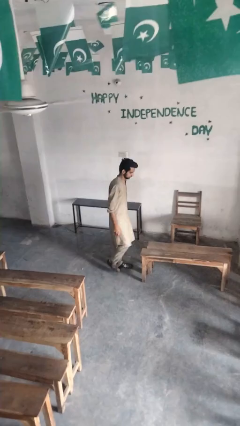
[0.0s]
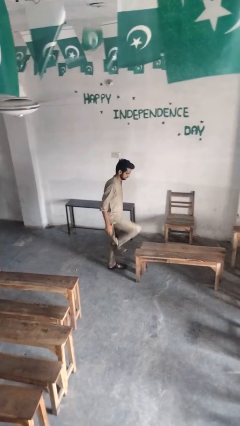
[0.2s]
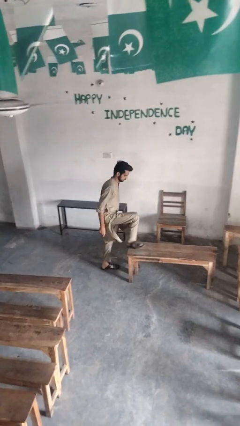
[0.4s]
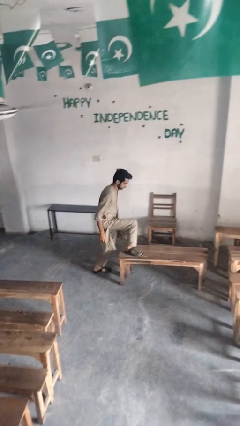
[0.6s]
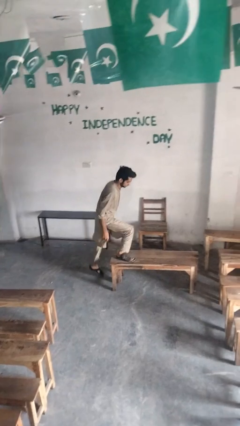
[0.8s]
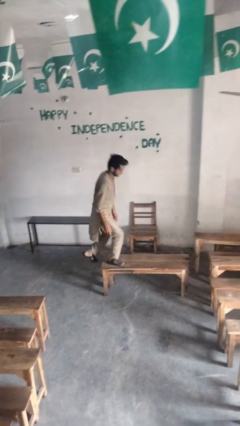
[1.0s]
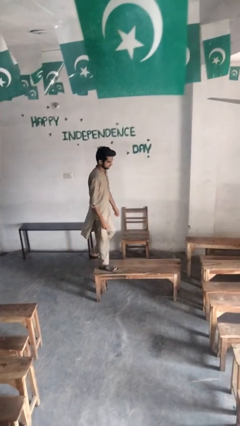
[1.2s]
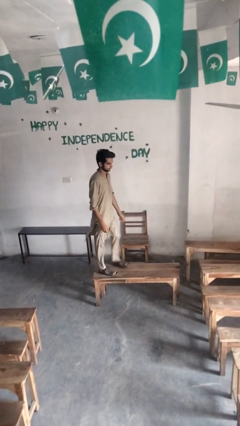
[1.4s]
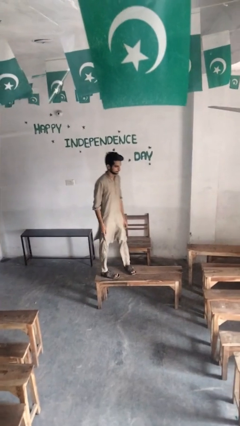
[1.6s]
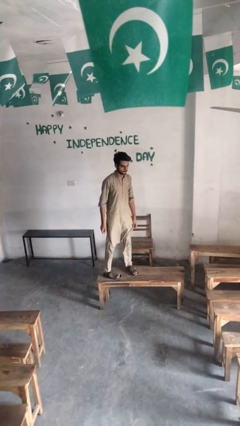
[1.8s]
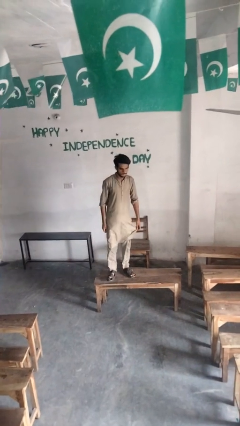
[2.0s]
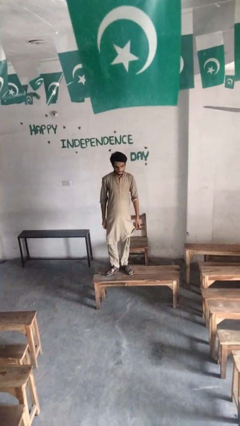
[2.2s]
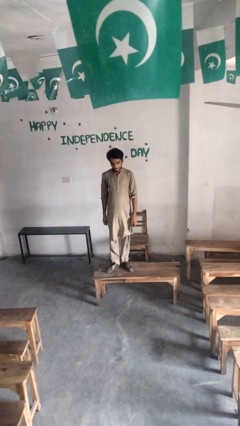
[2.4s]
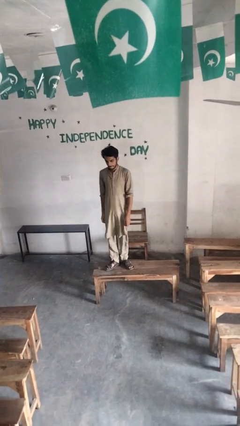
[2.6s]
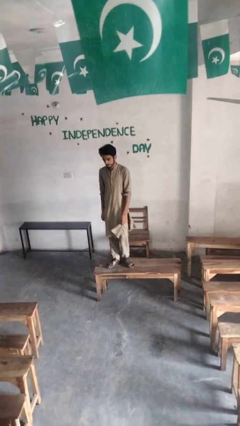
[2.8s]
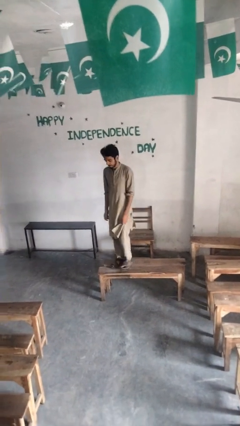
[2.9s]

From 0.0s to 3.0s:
person climbs on table

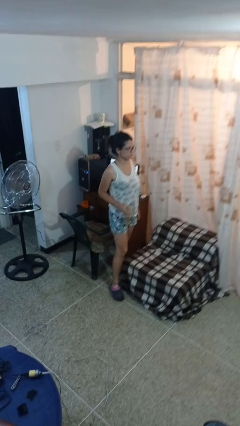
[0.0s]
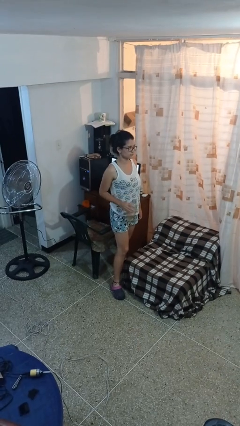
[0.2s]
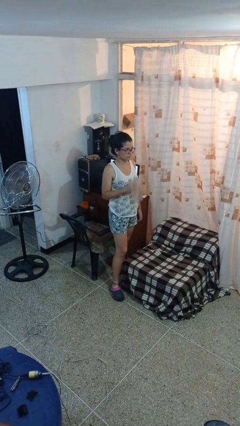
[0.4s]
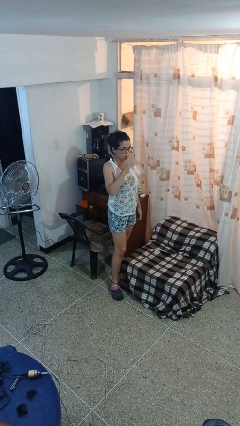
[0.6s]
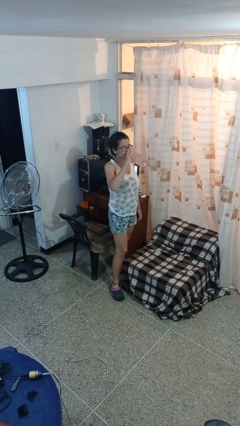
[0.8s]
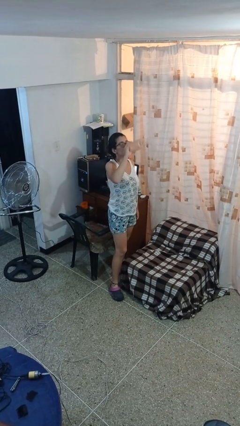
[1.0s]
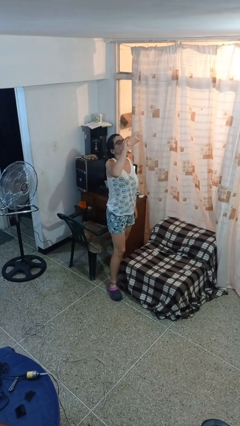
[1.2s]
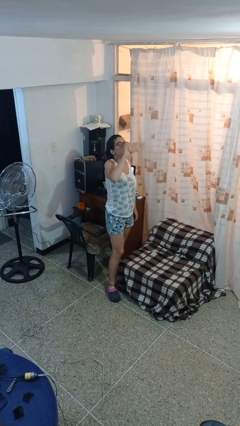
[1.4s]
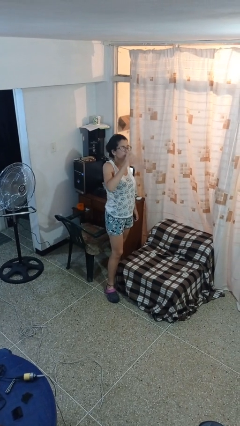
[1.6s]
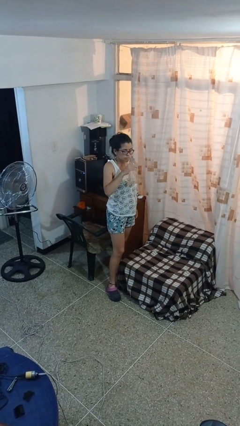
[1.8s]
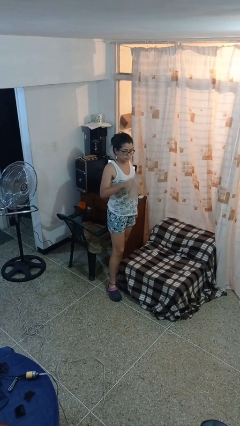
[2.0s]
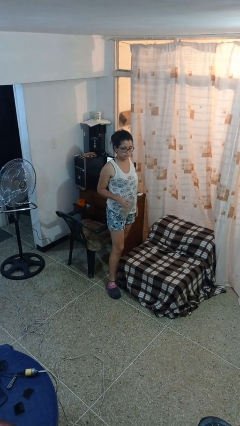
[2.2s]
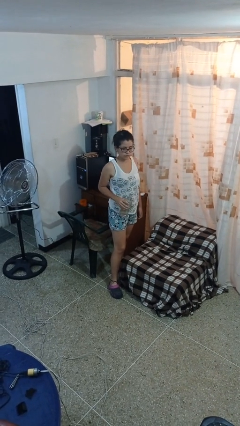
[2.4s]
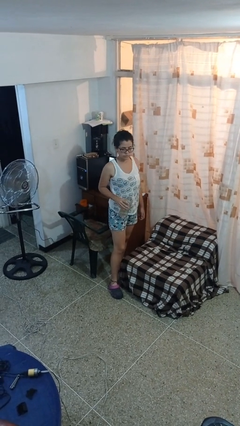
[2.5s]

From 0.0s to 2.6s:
person drinks from bottle

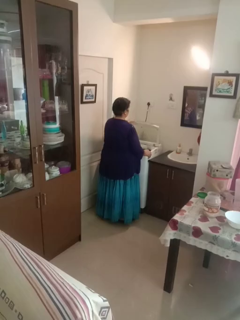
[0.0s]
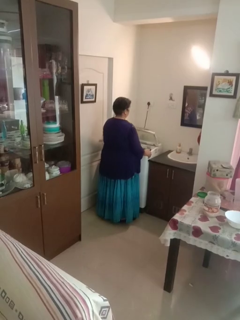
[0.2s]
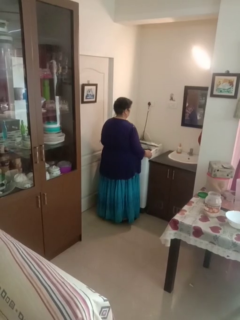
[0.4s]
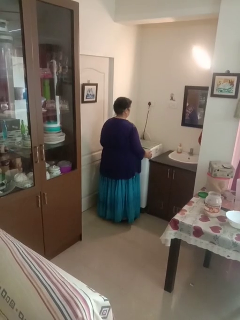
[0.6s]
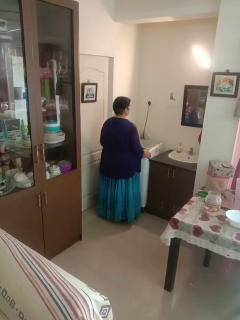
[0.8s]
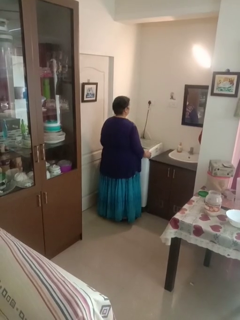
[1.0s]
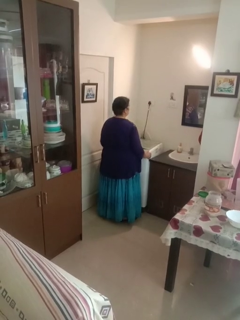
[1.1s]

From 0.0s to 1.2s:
person closes clothes washer

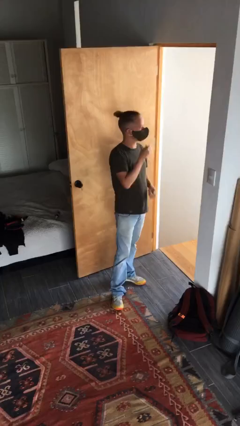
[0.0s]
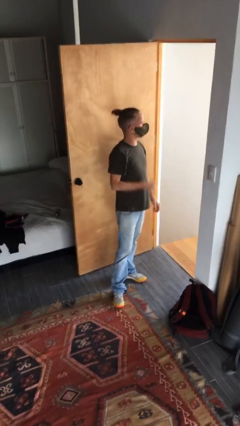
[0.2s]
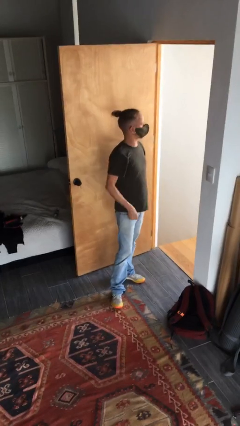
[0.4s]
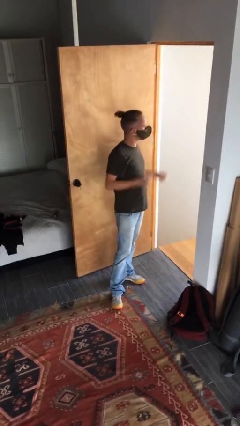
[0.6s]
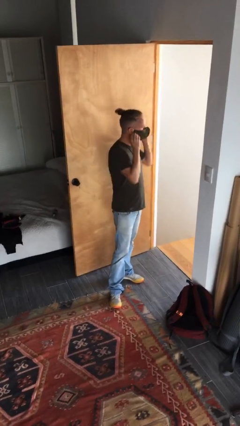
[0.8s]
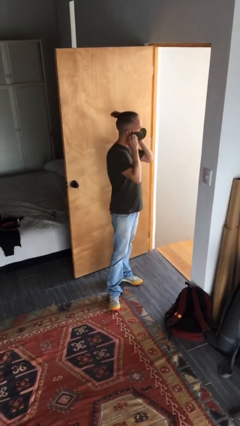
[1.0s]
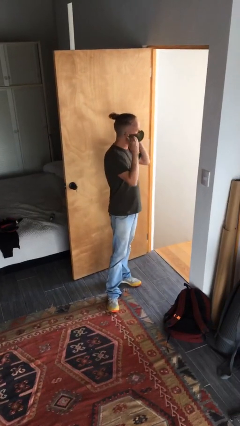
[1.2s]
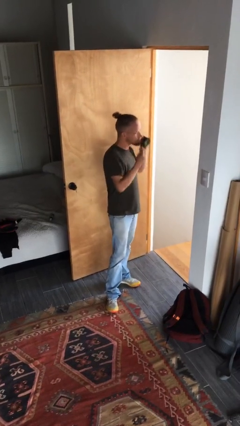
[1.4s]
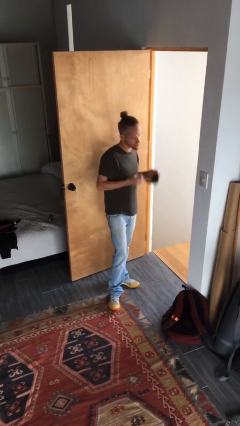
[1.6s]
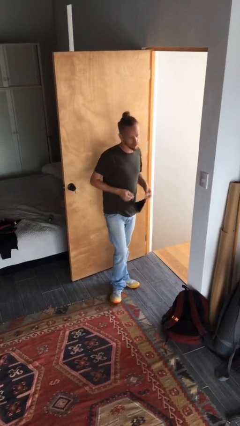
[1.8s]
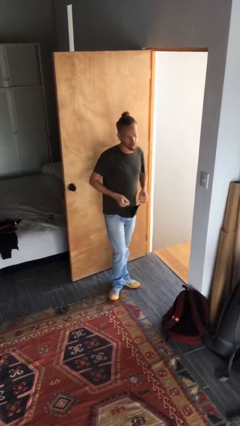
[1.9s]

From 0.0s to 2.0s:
person takes off facemask

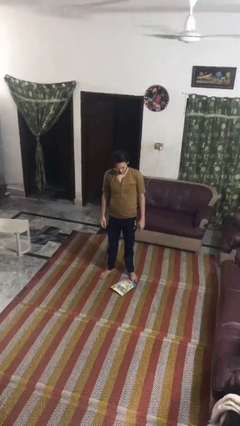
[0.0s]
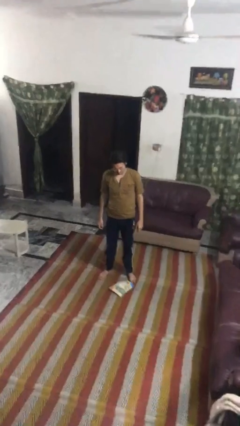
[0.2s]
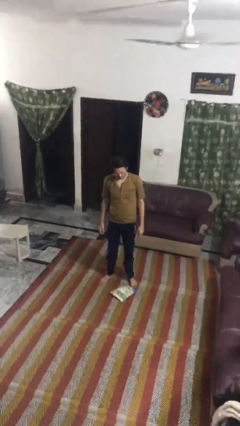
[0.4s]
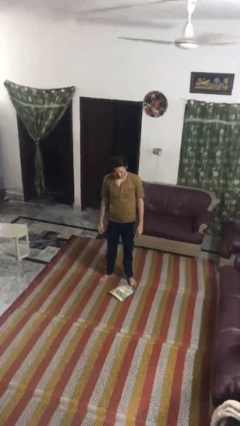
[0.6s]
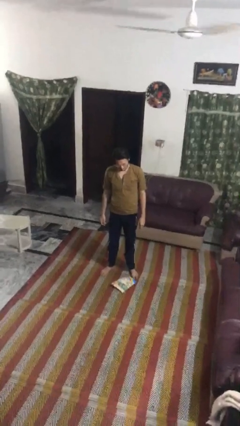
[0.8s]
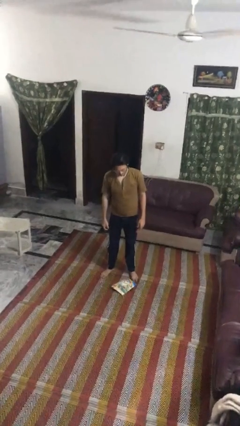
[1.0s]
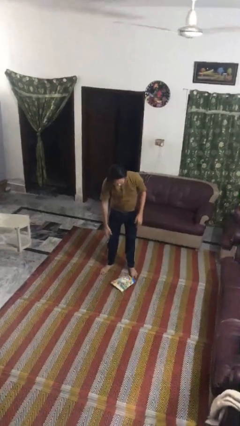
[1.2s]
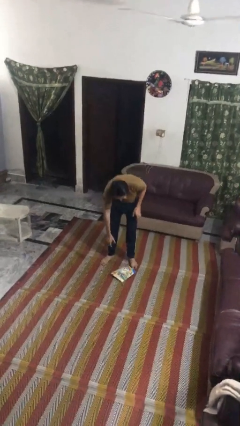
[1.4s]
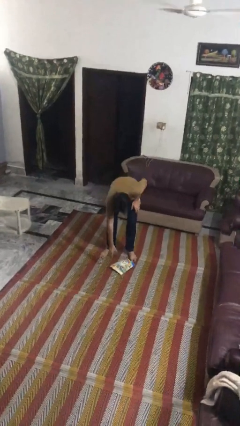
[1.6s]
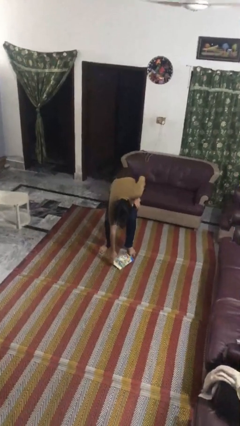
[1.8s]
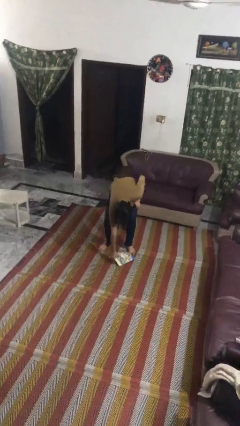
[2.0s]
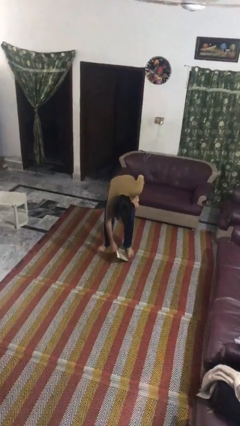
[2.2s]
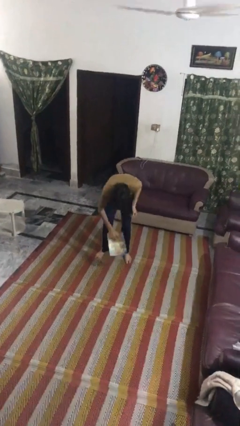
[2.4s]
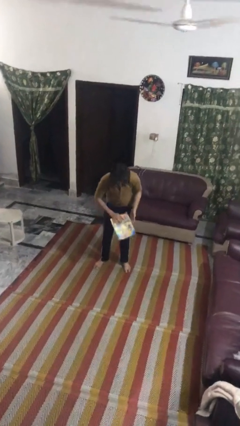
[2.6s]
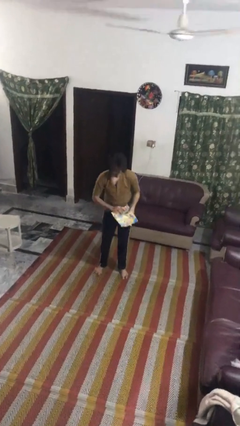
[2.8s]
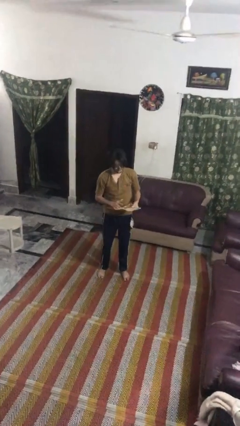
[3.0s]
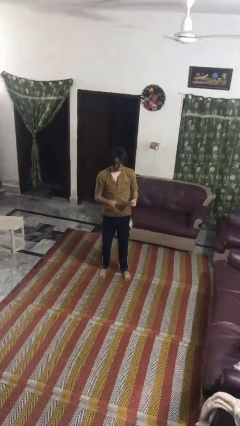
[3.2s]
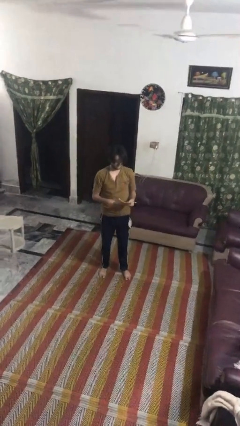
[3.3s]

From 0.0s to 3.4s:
person picks up object from floor

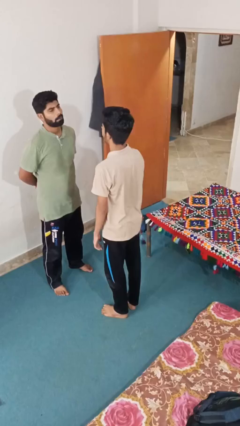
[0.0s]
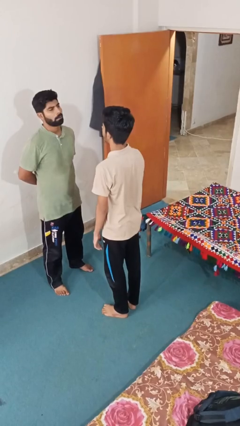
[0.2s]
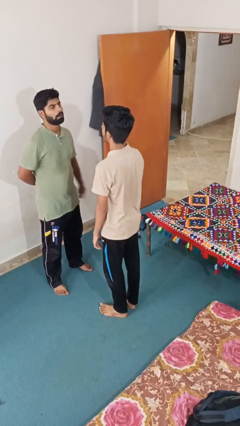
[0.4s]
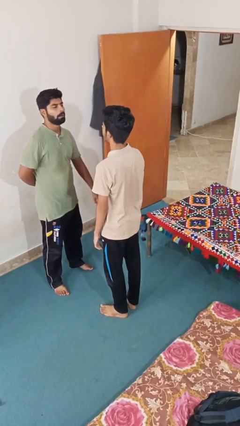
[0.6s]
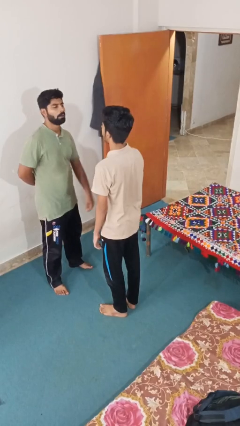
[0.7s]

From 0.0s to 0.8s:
person pounds shoulders of person

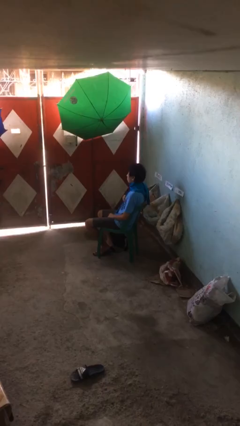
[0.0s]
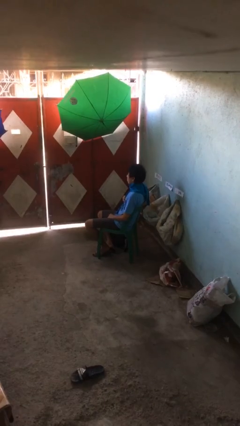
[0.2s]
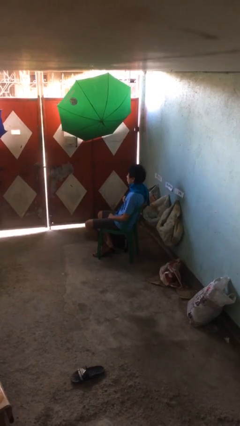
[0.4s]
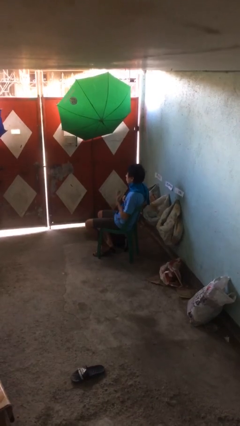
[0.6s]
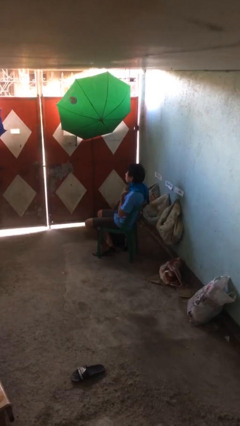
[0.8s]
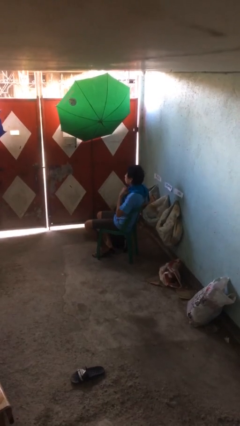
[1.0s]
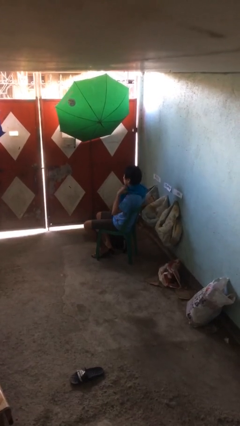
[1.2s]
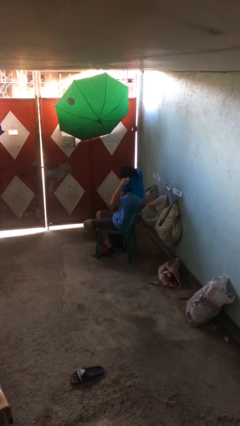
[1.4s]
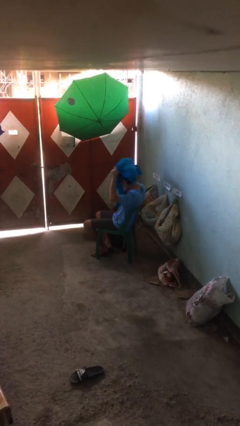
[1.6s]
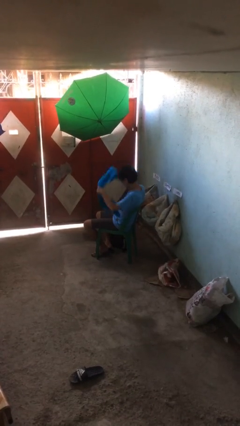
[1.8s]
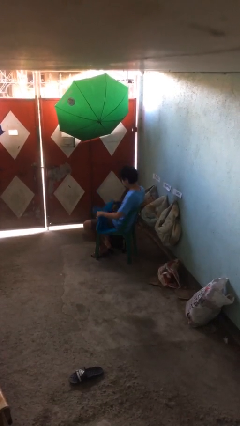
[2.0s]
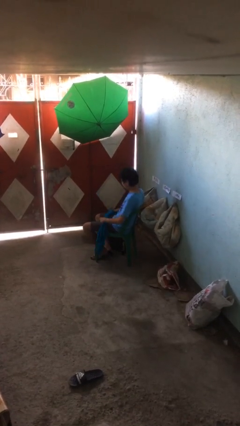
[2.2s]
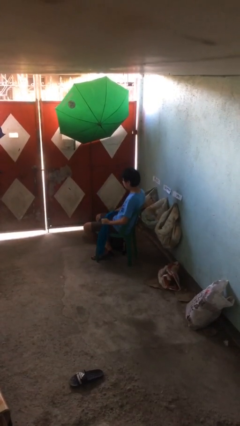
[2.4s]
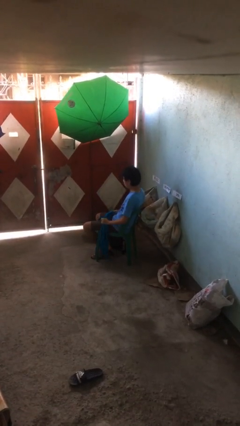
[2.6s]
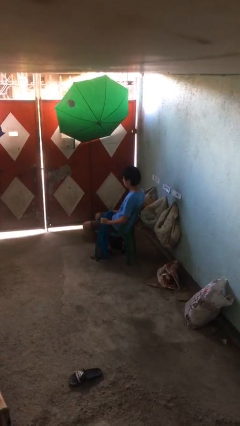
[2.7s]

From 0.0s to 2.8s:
person takes off scarf

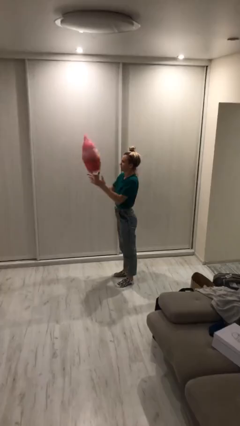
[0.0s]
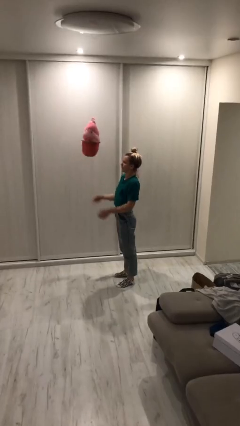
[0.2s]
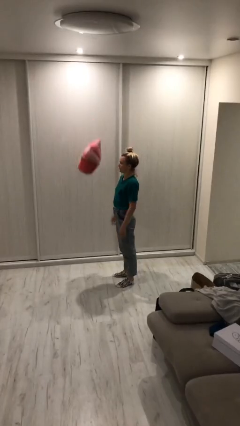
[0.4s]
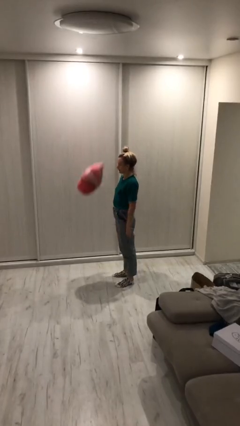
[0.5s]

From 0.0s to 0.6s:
person throws object into air

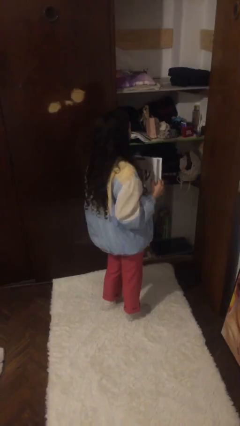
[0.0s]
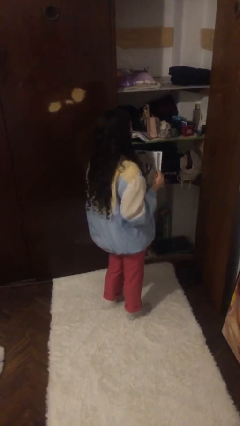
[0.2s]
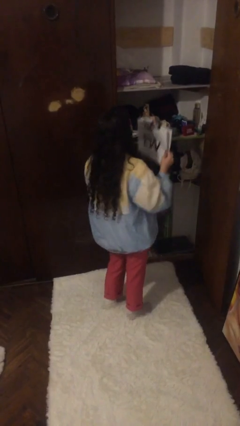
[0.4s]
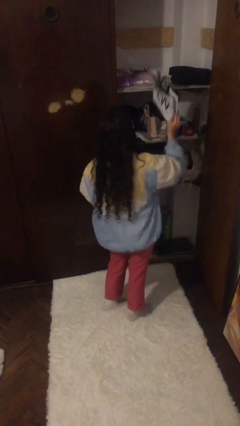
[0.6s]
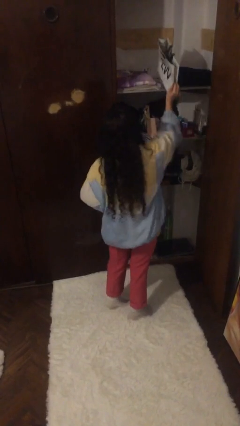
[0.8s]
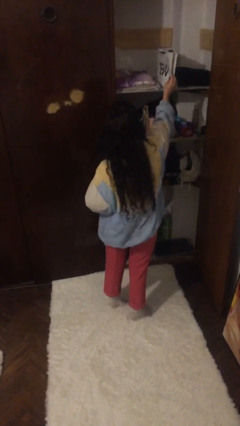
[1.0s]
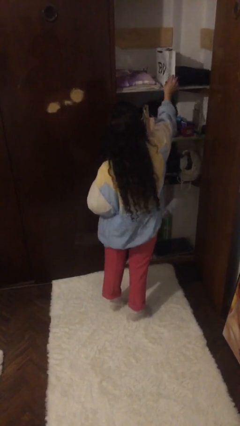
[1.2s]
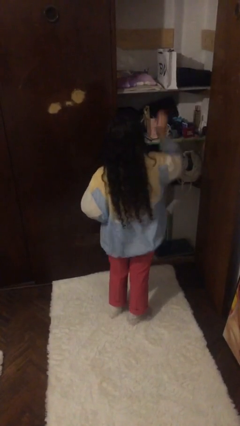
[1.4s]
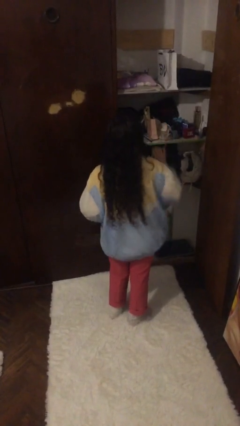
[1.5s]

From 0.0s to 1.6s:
person puts down object on shelf
